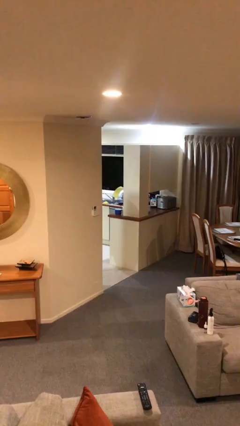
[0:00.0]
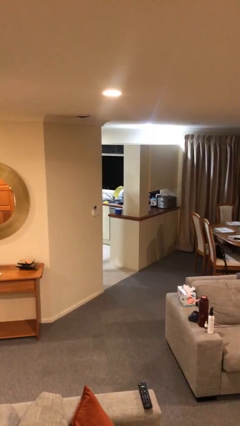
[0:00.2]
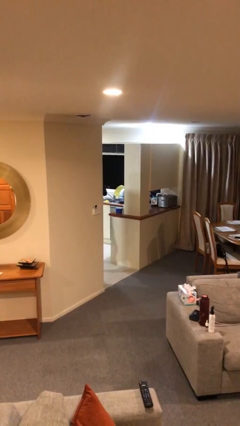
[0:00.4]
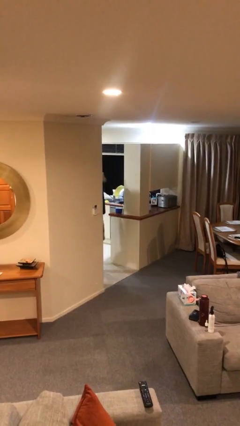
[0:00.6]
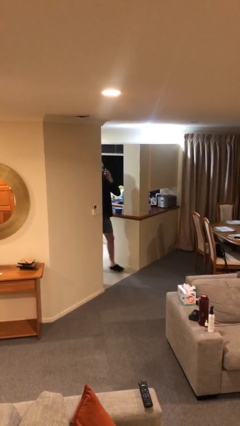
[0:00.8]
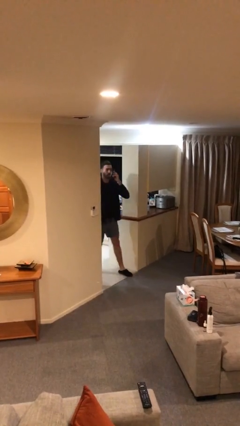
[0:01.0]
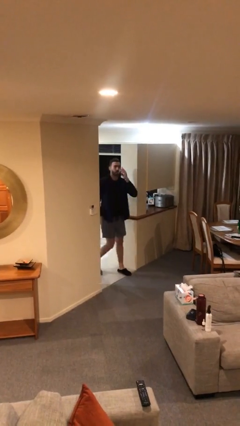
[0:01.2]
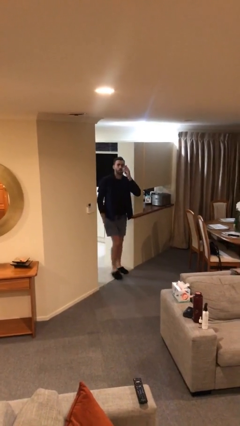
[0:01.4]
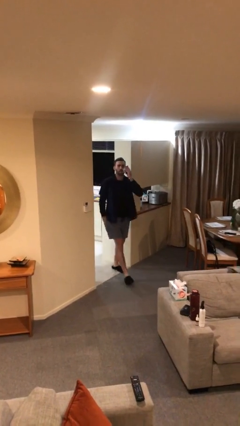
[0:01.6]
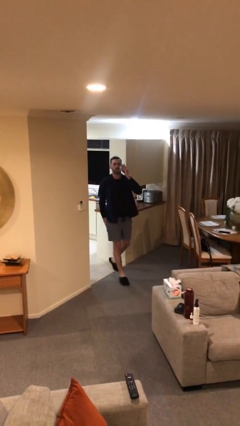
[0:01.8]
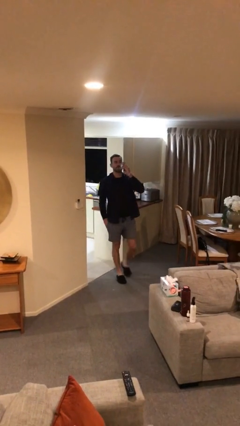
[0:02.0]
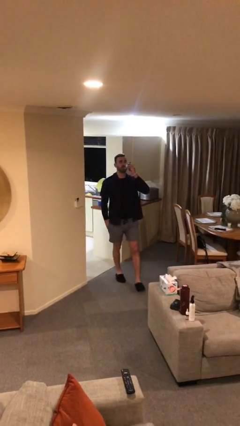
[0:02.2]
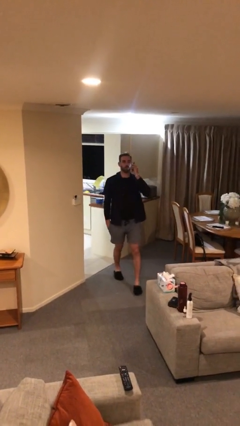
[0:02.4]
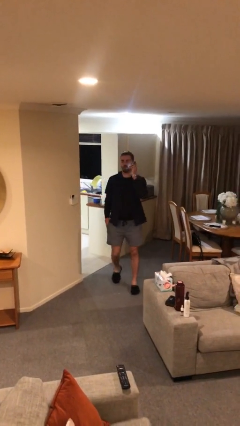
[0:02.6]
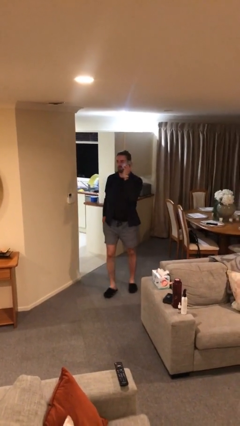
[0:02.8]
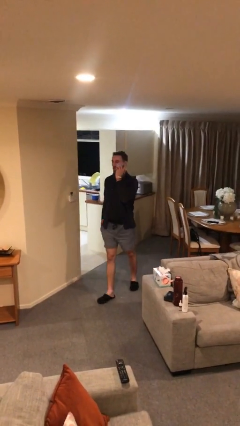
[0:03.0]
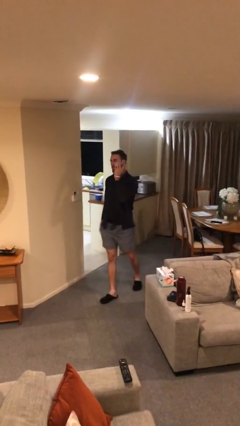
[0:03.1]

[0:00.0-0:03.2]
person enters scene through structure

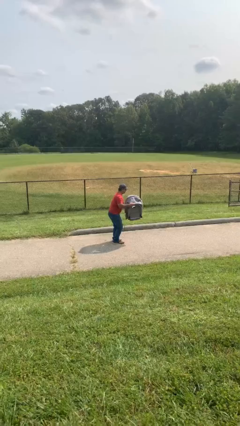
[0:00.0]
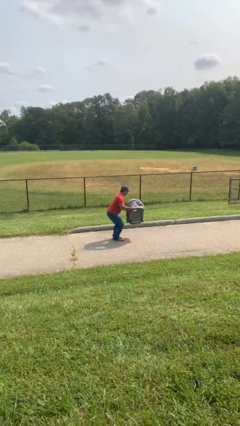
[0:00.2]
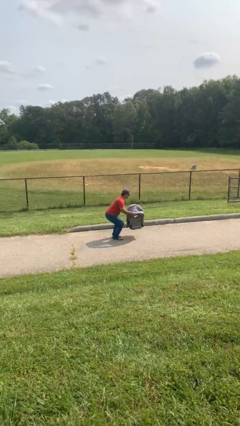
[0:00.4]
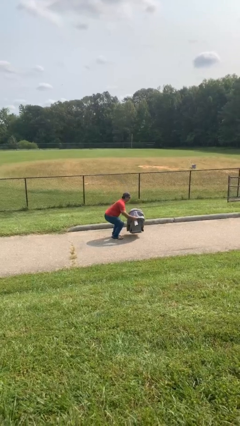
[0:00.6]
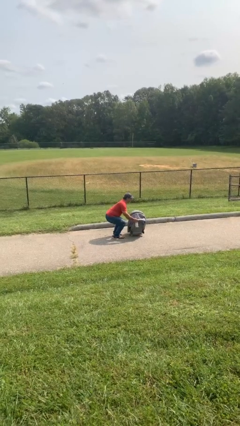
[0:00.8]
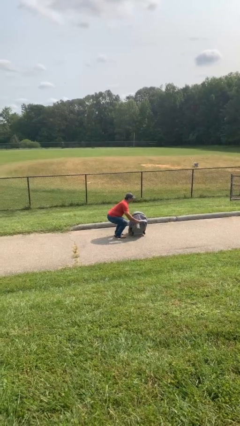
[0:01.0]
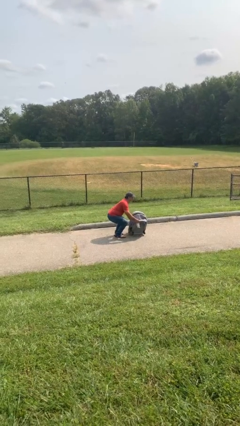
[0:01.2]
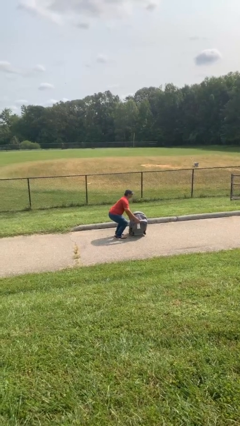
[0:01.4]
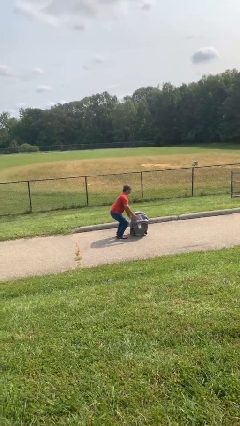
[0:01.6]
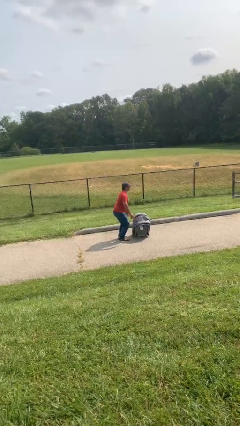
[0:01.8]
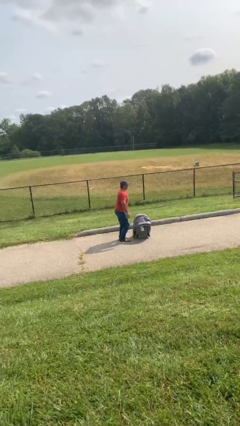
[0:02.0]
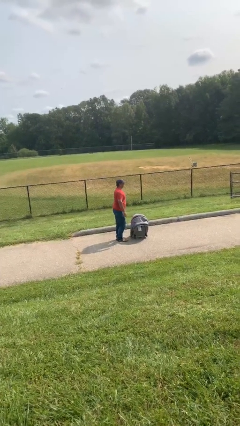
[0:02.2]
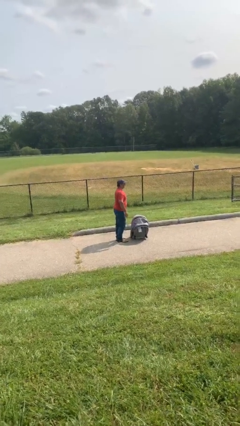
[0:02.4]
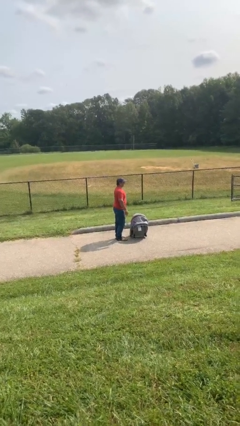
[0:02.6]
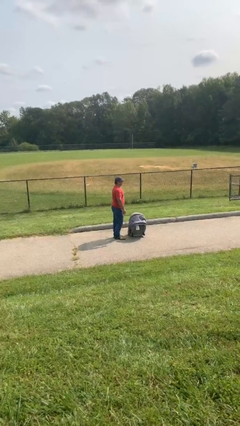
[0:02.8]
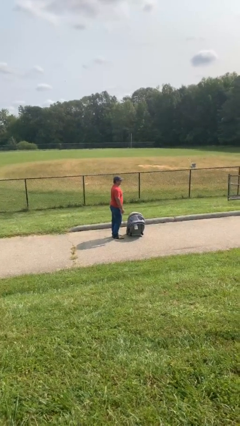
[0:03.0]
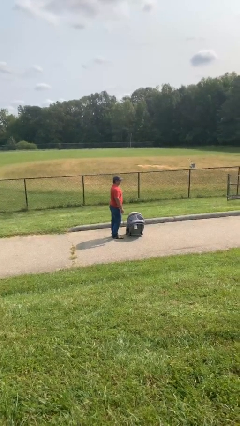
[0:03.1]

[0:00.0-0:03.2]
person puts down object on floor

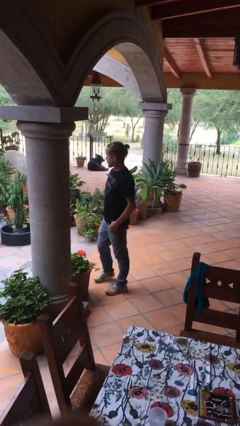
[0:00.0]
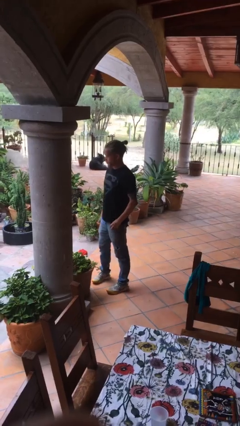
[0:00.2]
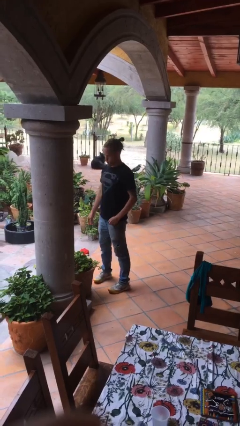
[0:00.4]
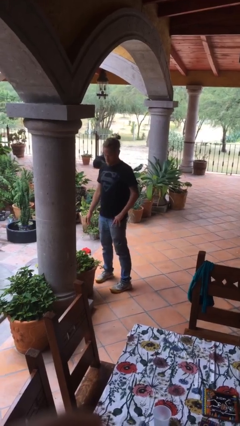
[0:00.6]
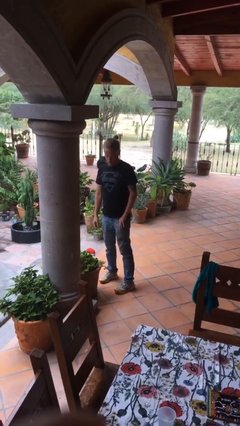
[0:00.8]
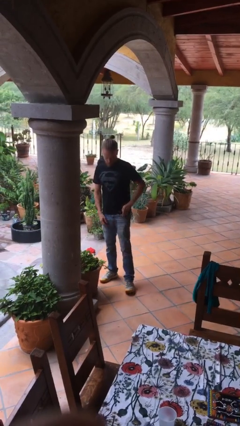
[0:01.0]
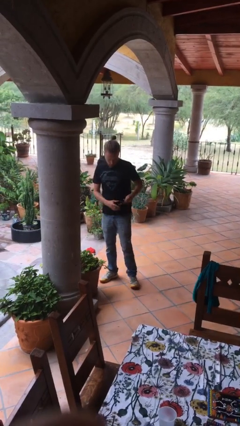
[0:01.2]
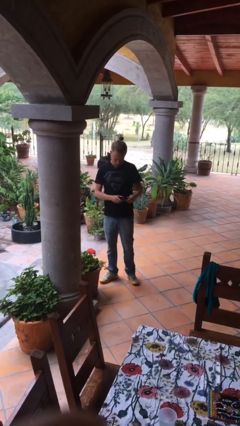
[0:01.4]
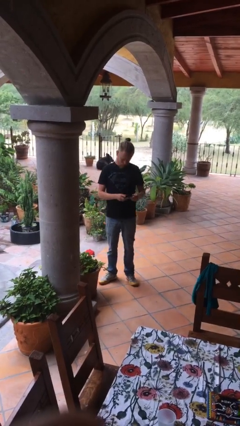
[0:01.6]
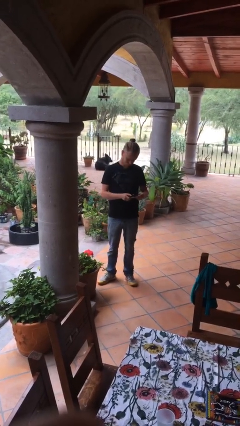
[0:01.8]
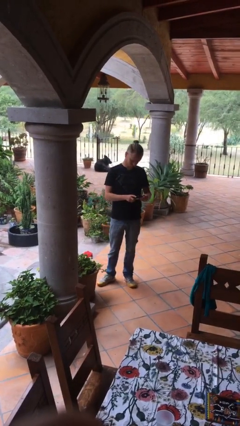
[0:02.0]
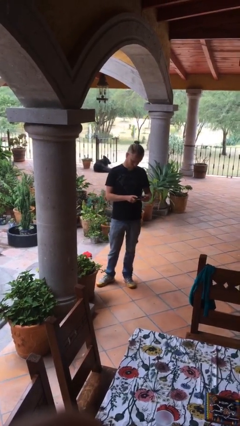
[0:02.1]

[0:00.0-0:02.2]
person takes phone from pocket

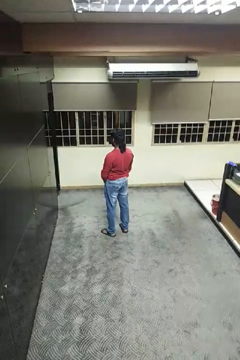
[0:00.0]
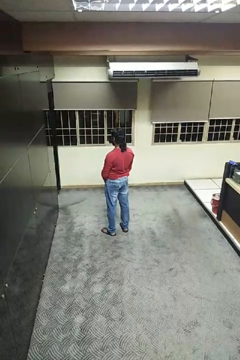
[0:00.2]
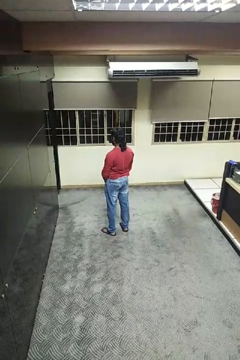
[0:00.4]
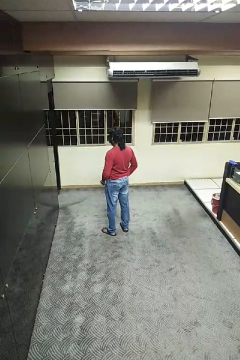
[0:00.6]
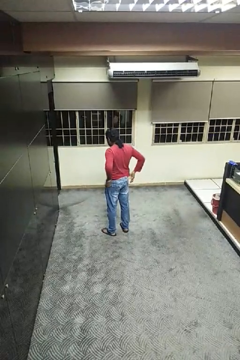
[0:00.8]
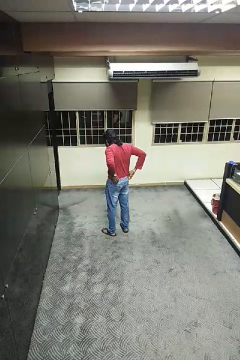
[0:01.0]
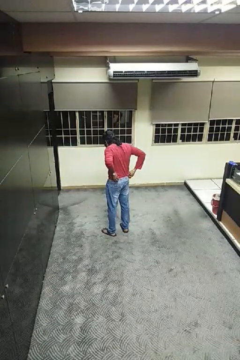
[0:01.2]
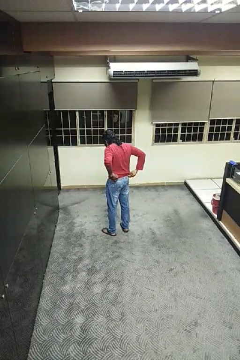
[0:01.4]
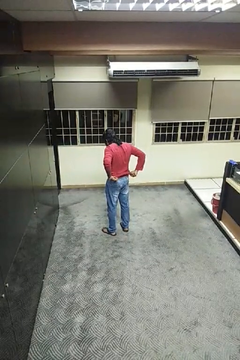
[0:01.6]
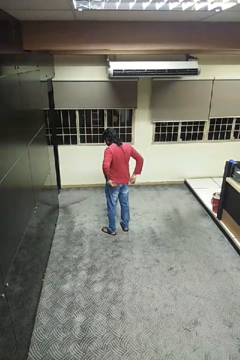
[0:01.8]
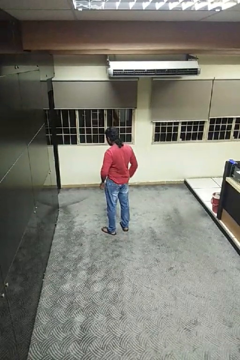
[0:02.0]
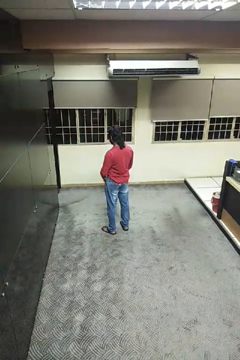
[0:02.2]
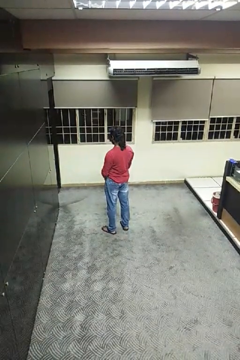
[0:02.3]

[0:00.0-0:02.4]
person untucks shirt

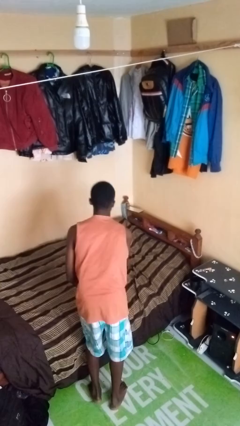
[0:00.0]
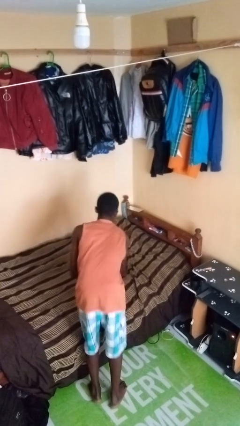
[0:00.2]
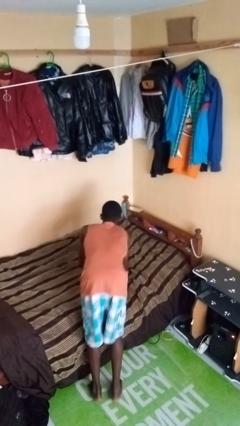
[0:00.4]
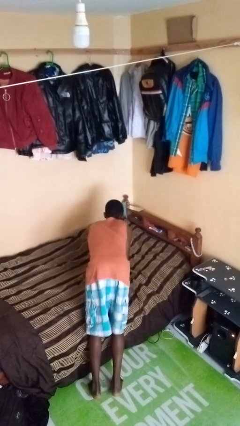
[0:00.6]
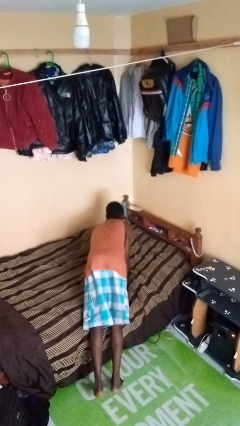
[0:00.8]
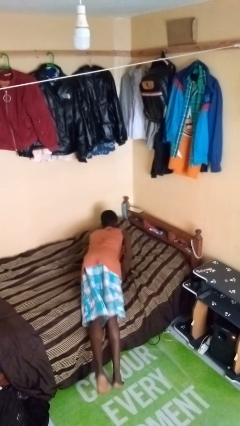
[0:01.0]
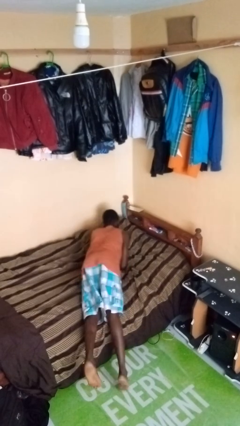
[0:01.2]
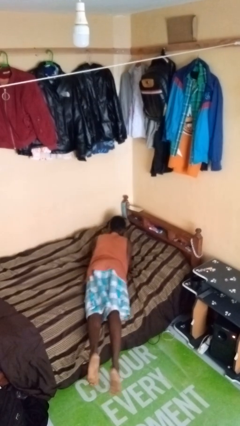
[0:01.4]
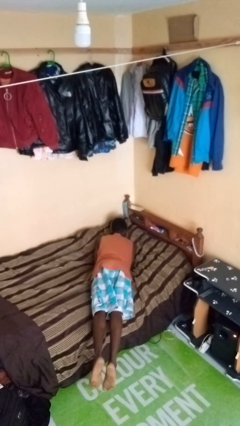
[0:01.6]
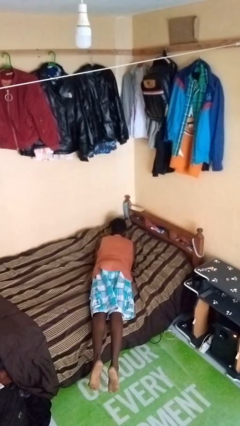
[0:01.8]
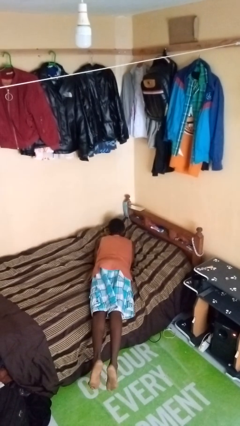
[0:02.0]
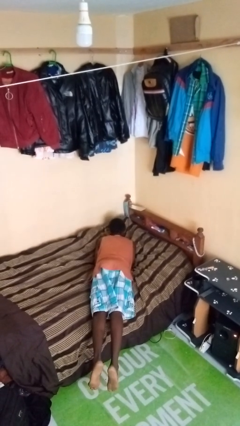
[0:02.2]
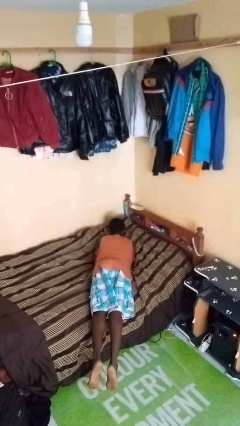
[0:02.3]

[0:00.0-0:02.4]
person lies down on bed

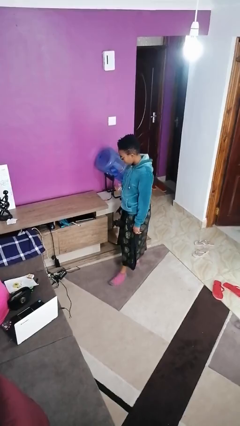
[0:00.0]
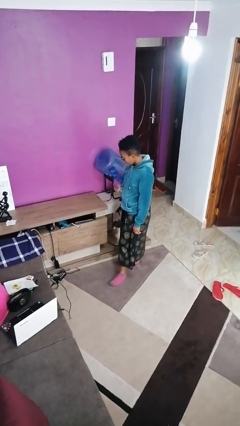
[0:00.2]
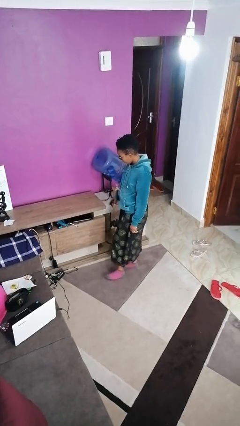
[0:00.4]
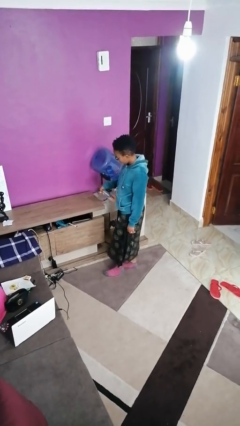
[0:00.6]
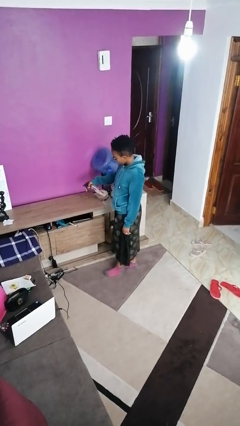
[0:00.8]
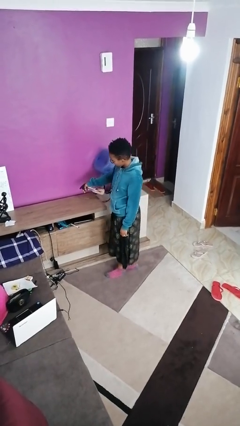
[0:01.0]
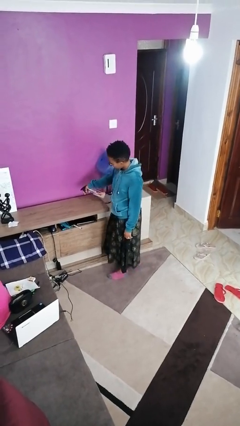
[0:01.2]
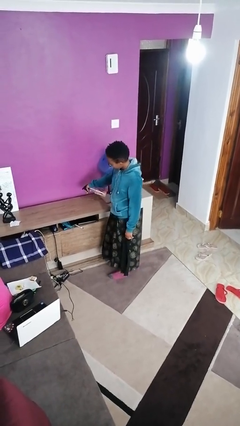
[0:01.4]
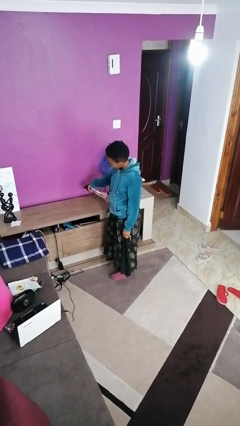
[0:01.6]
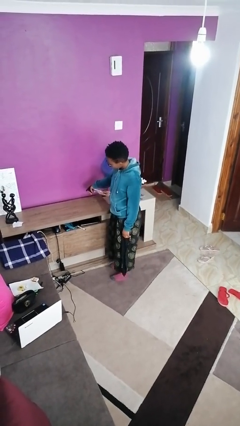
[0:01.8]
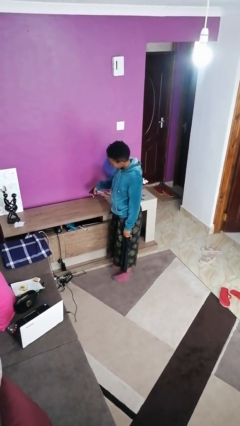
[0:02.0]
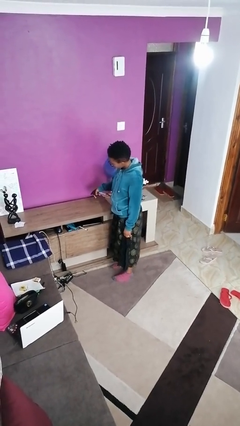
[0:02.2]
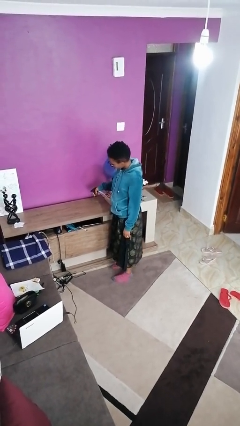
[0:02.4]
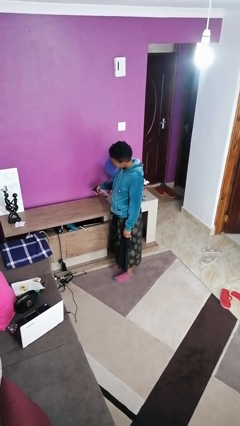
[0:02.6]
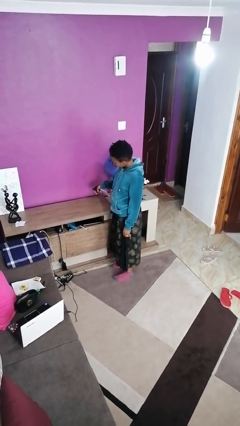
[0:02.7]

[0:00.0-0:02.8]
person sprays from bottle

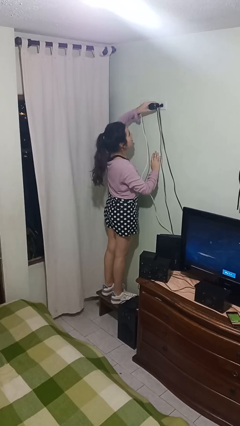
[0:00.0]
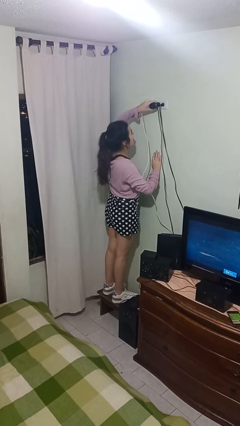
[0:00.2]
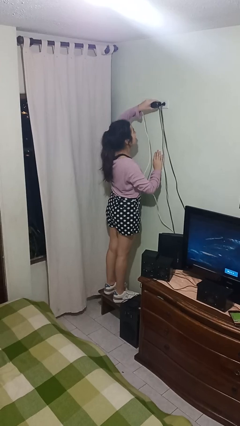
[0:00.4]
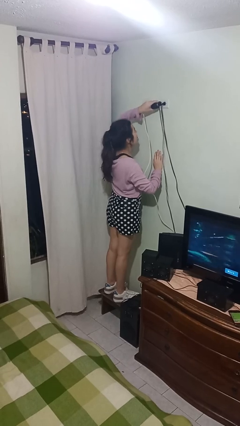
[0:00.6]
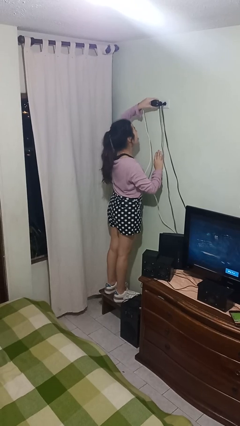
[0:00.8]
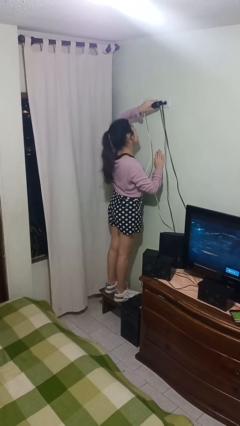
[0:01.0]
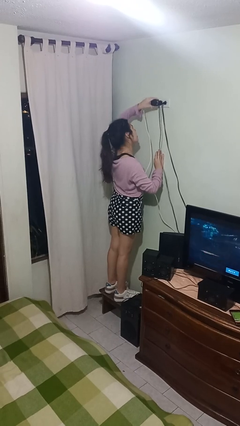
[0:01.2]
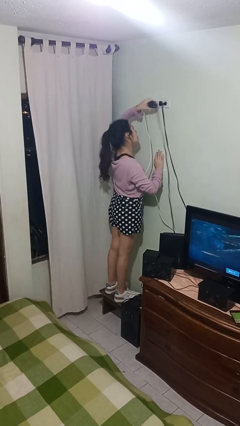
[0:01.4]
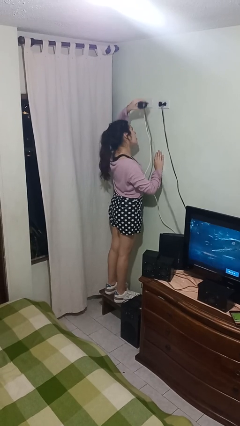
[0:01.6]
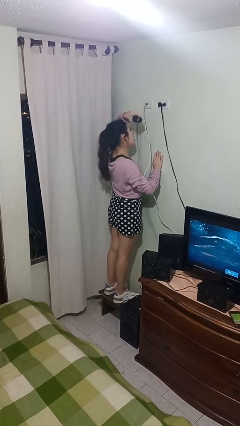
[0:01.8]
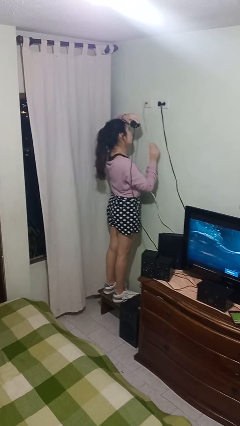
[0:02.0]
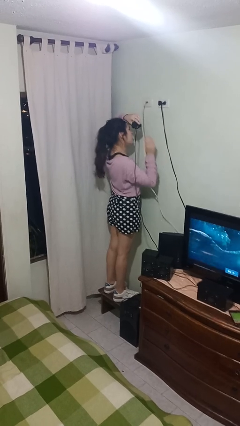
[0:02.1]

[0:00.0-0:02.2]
person unplugs from electrical socket
